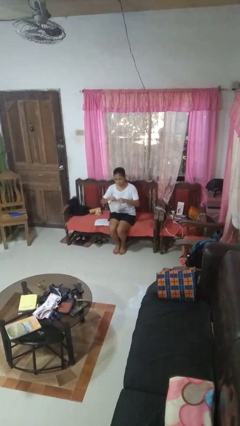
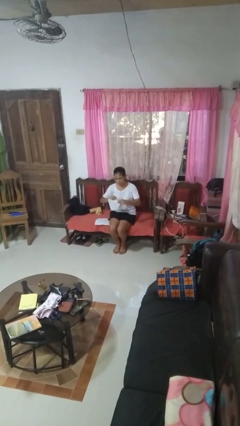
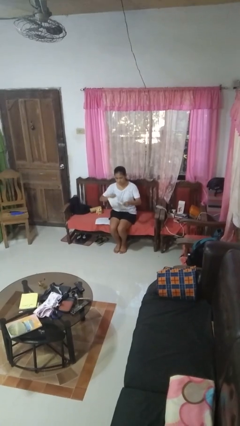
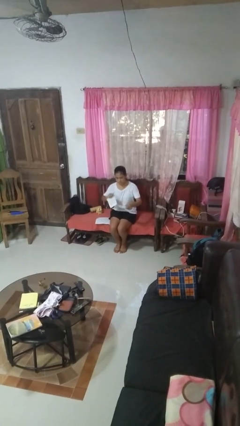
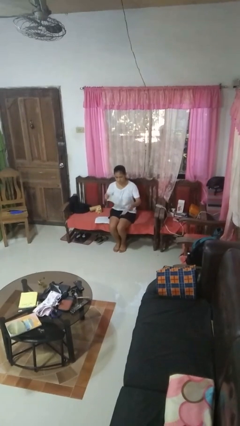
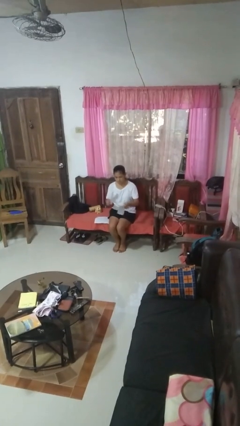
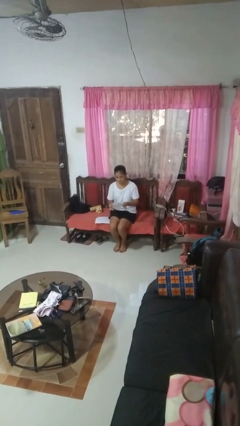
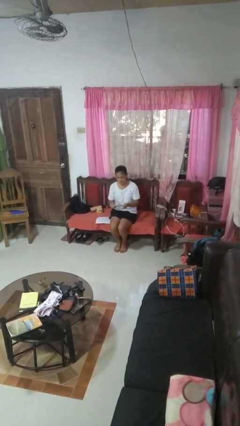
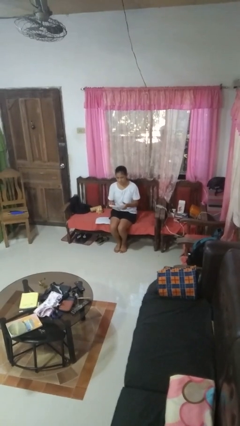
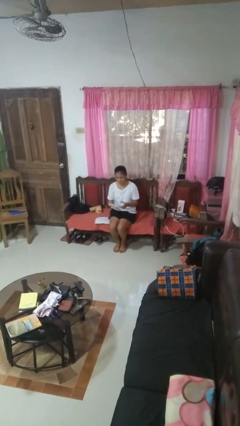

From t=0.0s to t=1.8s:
person tears paper

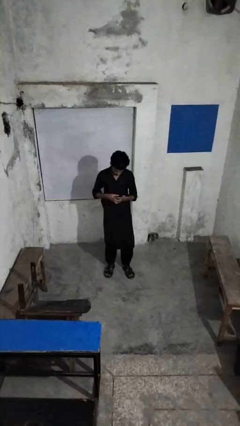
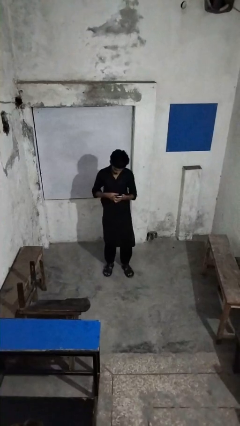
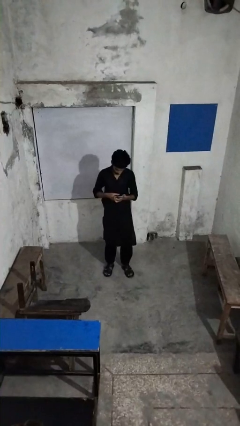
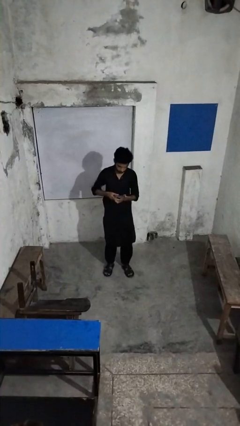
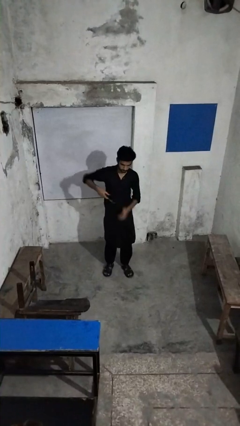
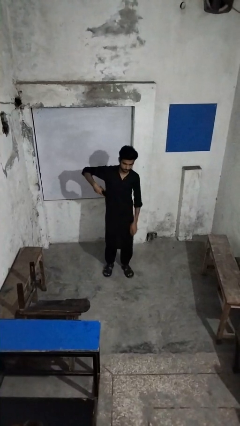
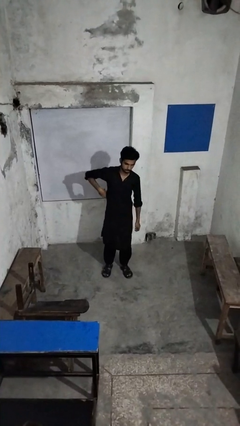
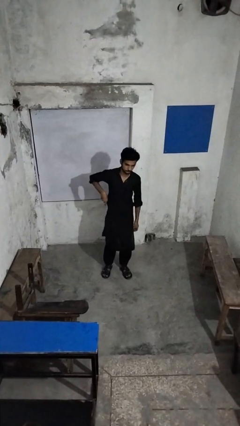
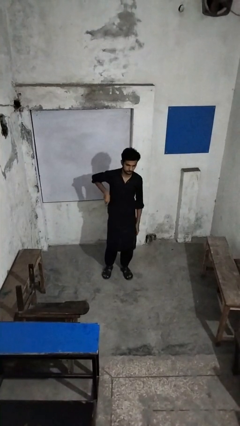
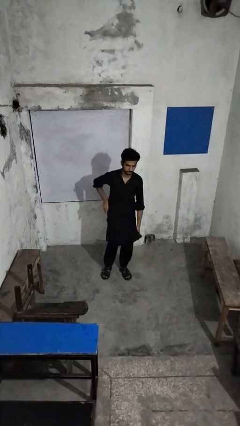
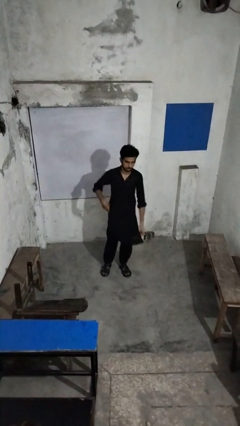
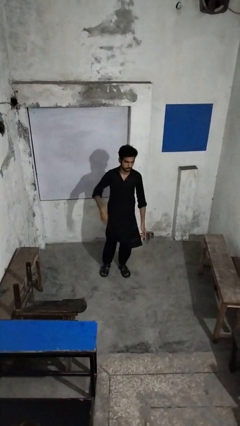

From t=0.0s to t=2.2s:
person puts phone into pocket

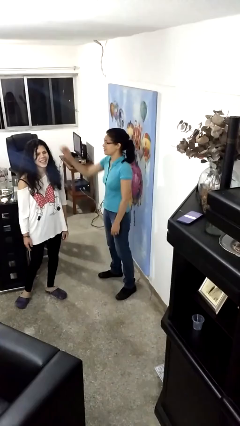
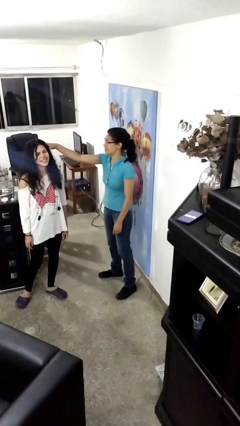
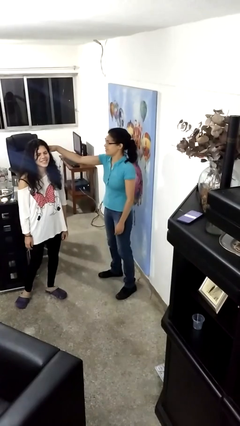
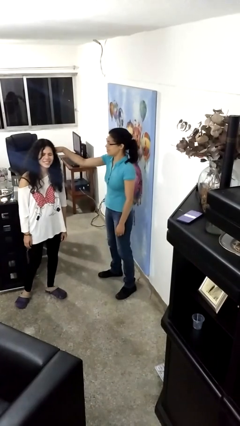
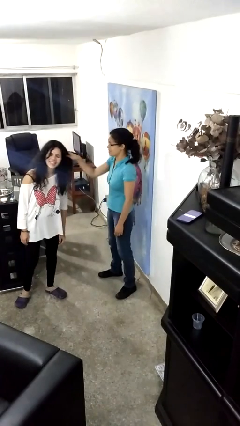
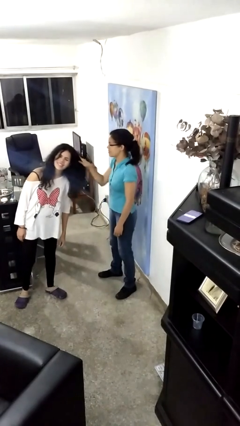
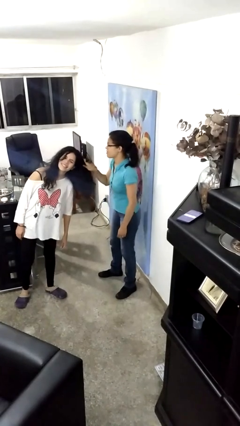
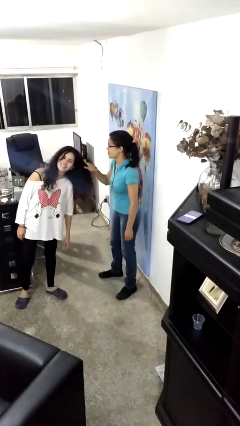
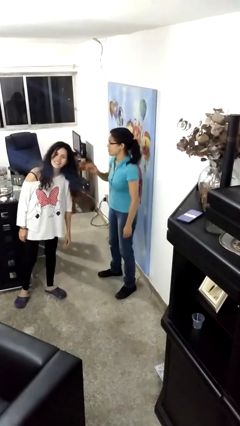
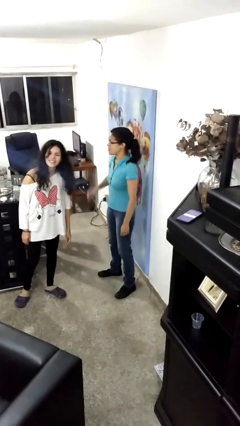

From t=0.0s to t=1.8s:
person grabs person by hair

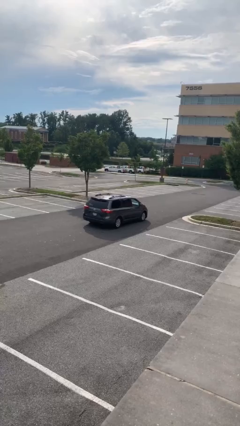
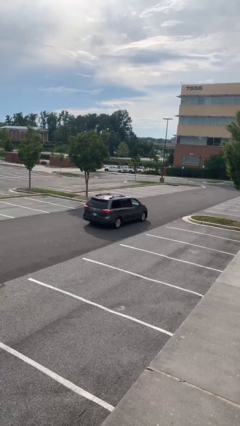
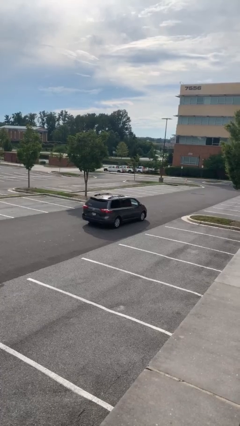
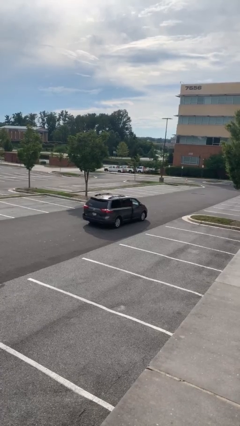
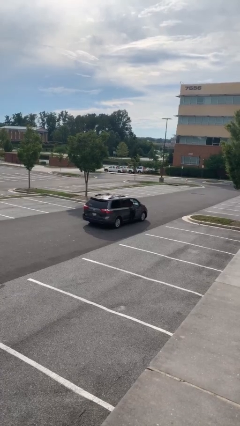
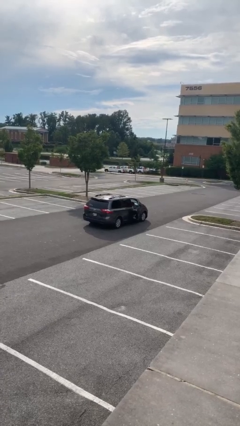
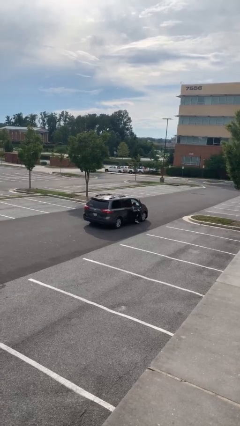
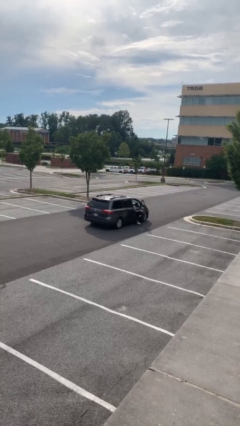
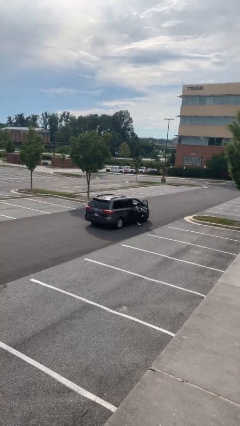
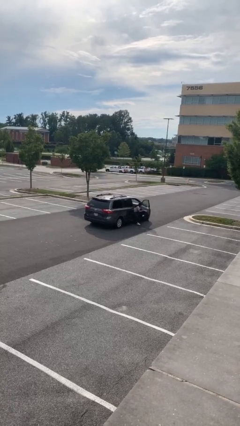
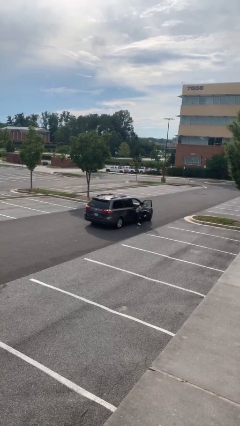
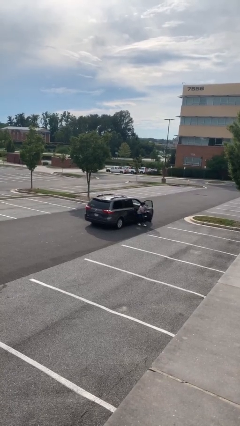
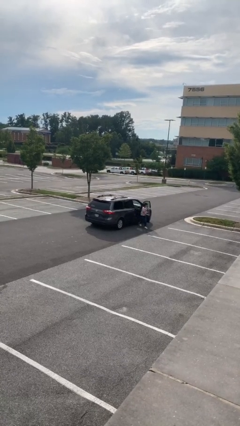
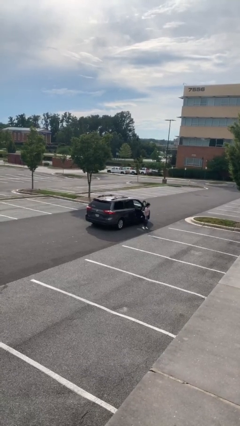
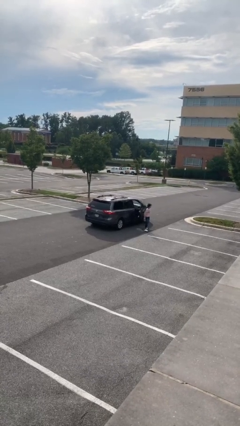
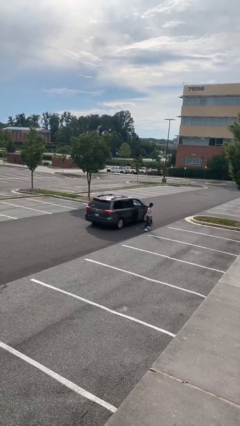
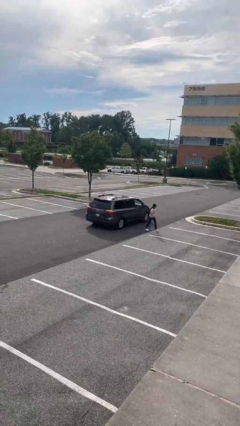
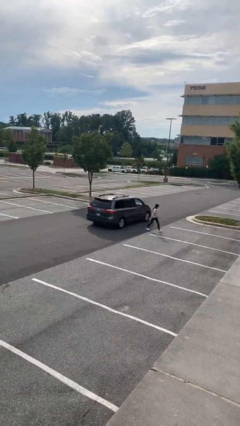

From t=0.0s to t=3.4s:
car drops off person

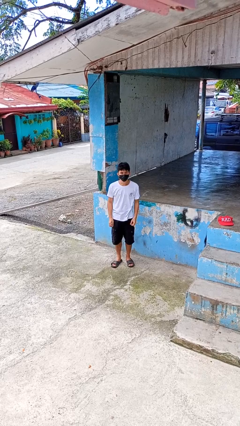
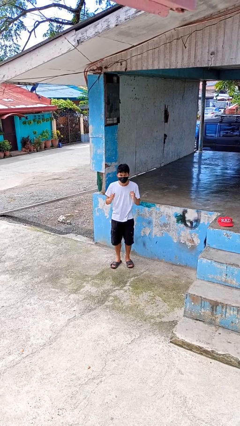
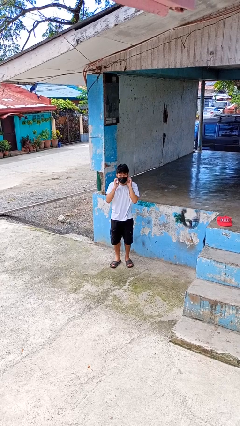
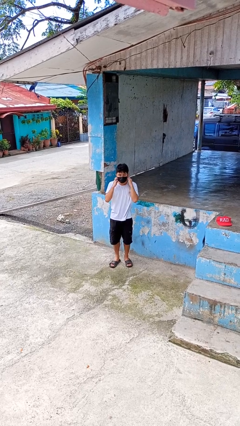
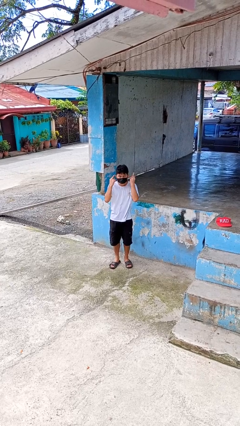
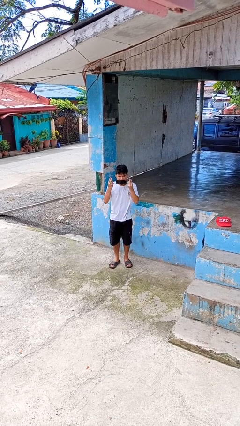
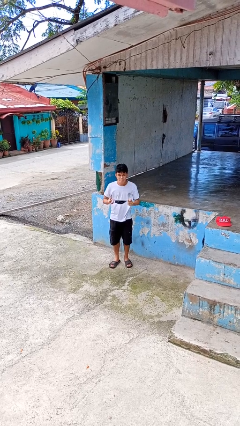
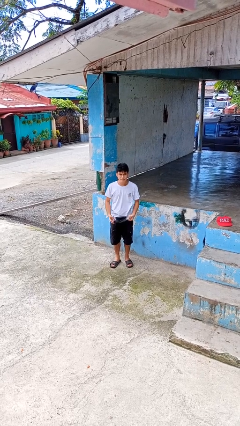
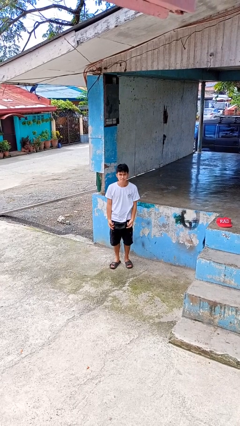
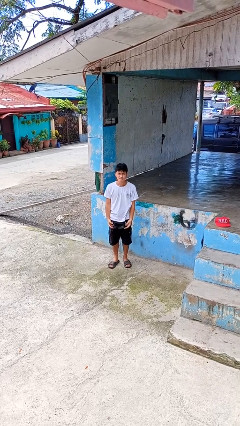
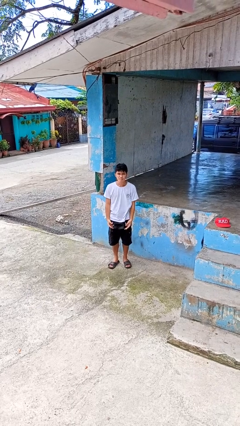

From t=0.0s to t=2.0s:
person takes off facemask

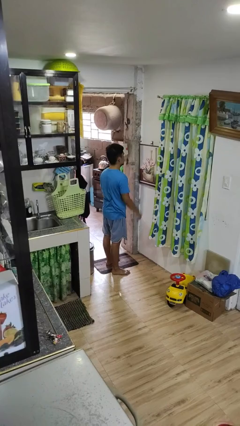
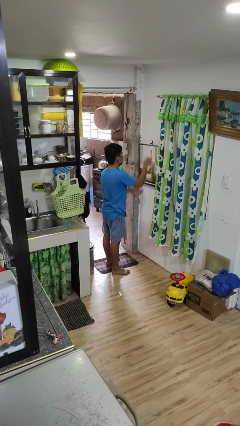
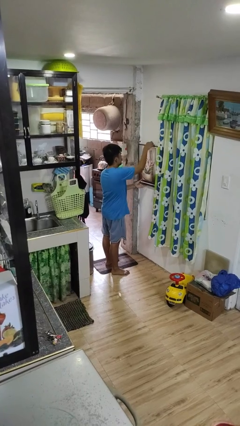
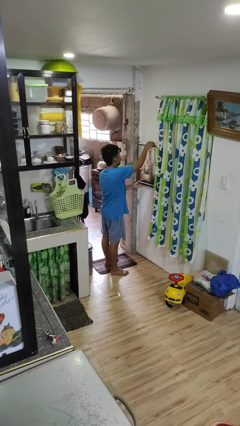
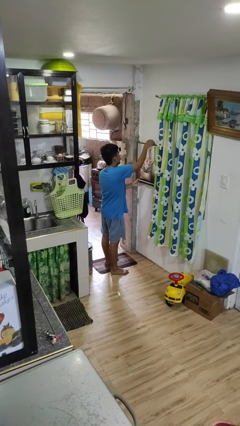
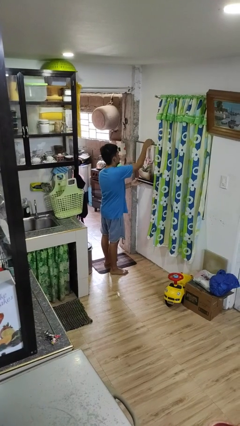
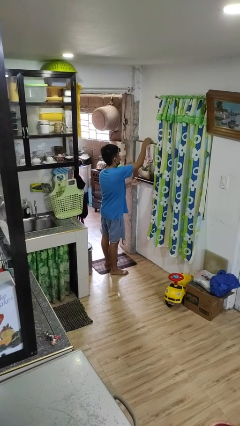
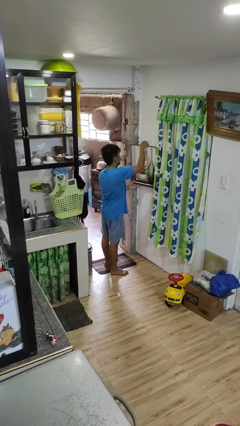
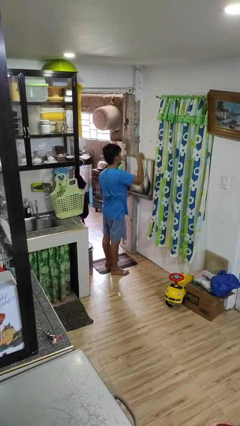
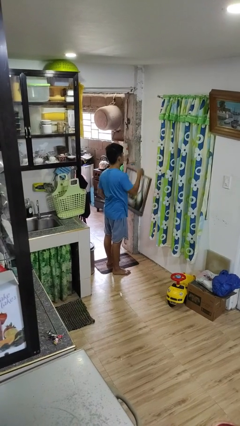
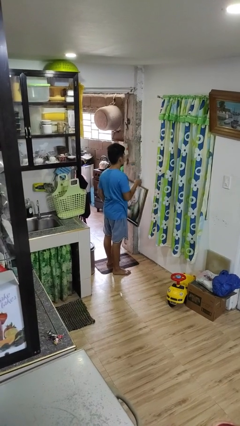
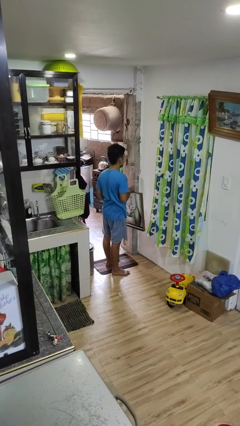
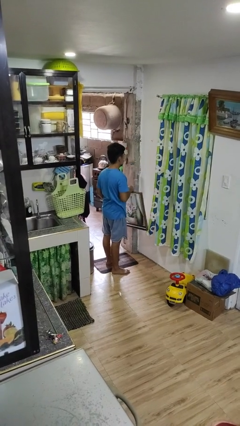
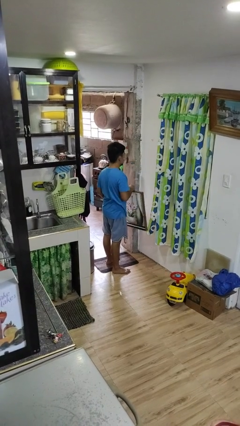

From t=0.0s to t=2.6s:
person takes down picture frame

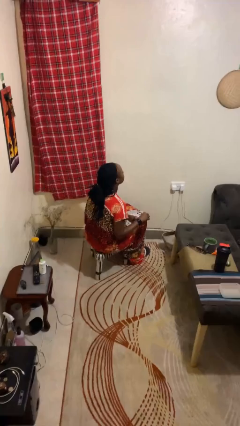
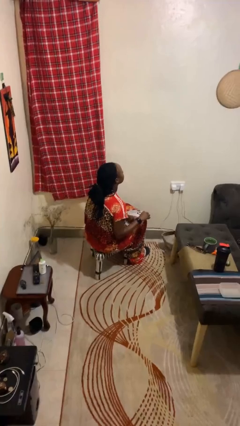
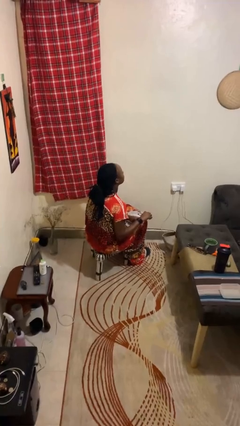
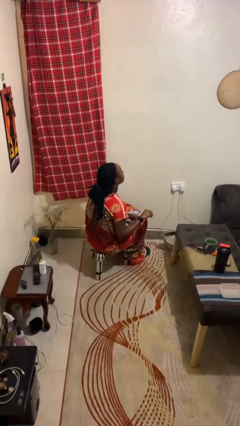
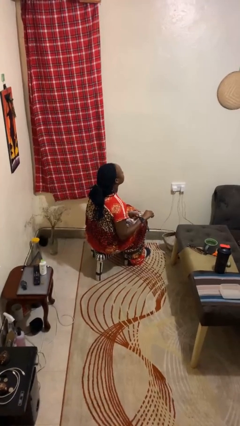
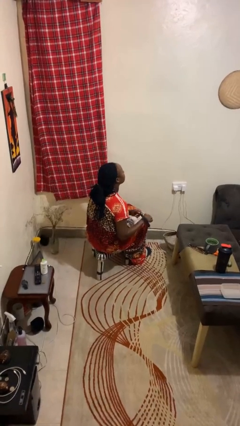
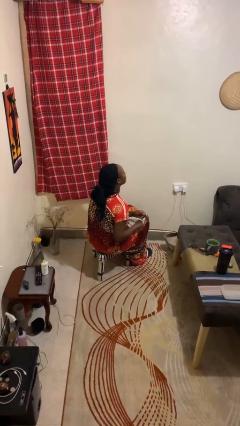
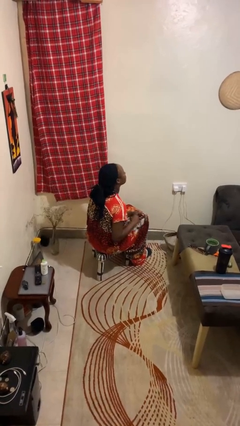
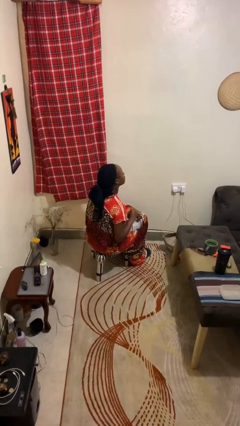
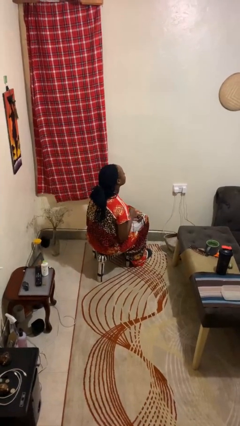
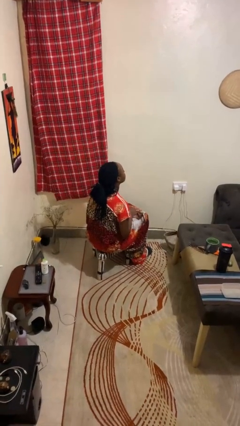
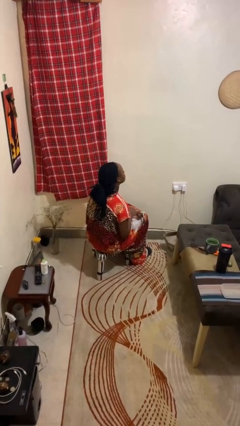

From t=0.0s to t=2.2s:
person takes off wristwatch

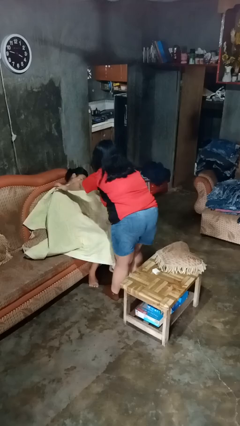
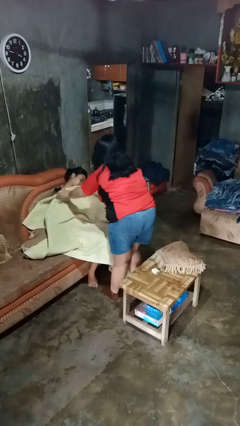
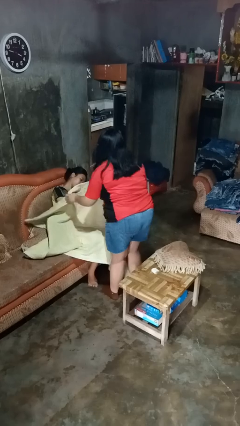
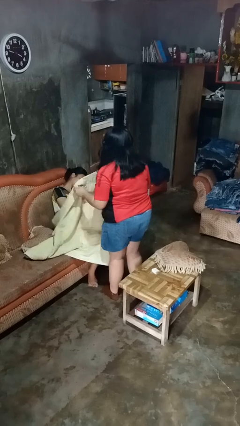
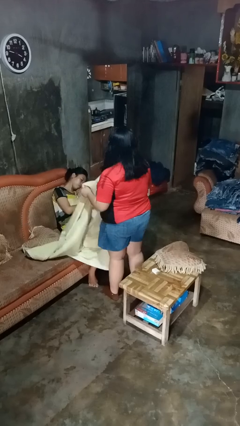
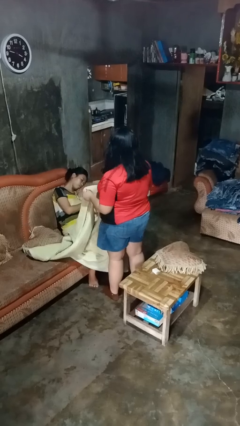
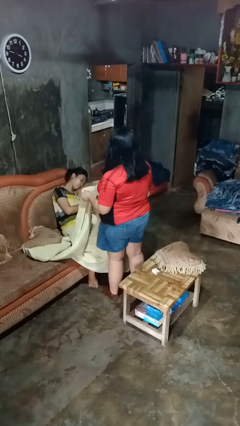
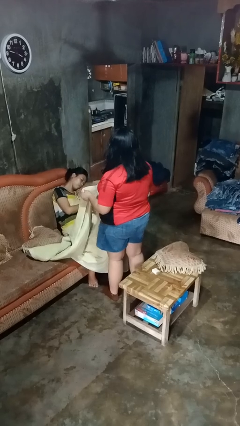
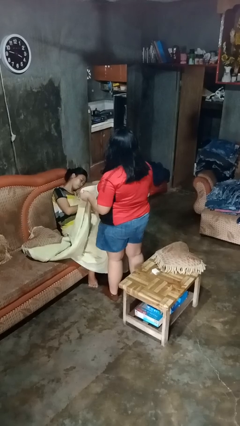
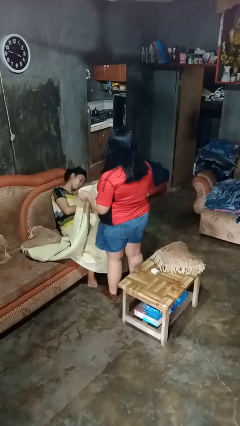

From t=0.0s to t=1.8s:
person uncovers friend with blanket
